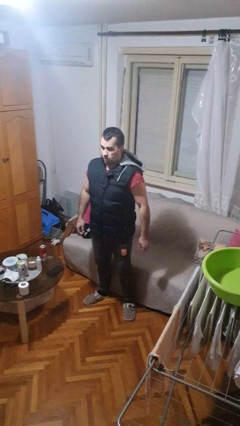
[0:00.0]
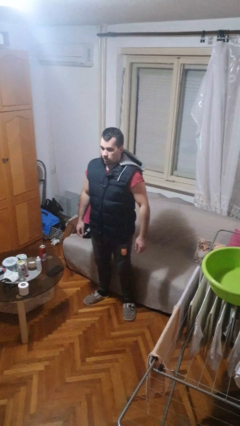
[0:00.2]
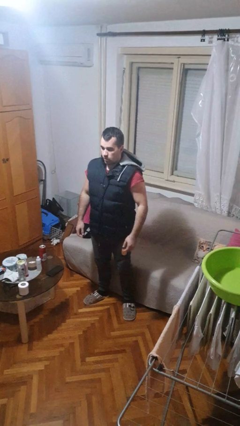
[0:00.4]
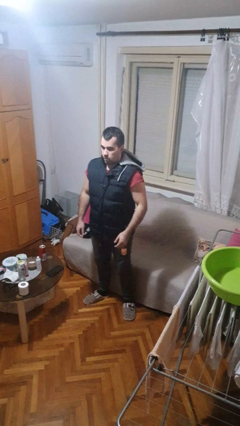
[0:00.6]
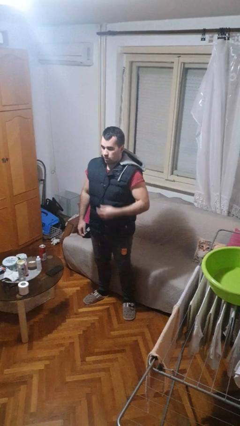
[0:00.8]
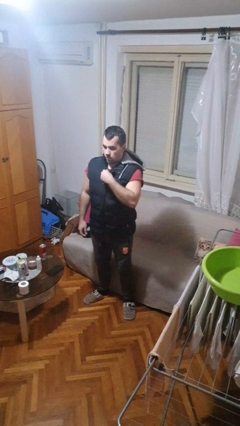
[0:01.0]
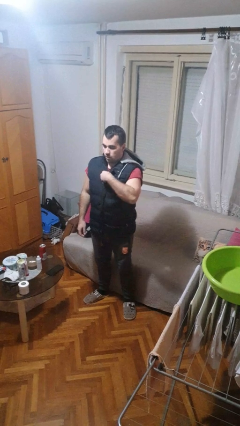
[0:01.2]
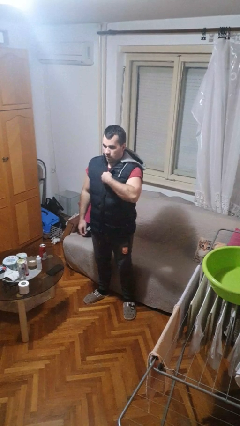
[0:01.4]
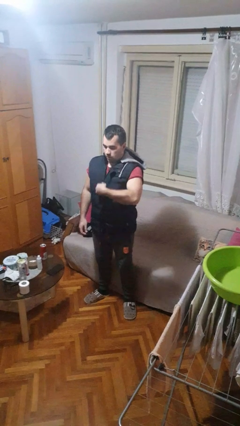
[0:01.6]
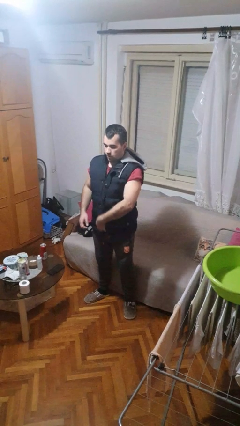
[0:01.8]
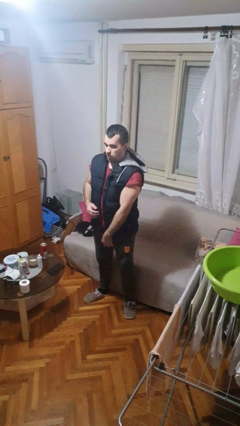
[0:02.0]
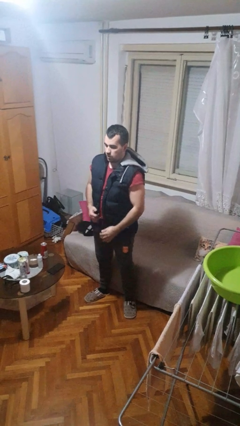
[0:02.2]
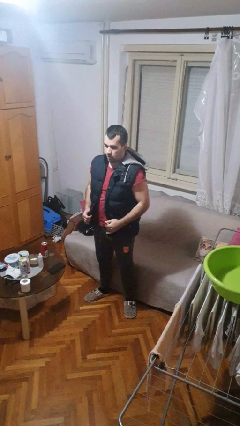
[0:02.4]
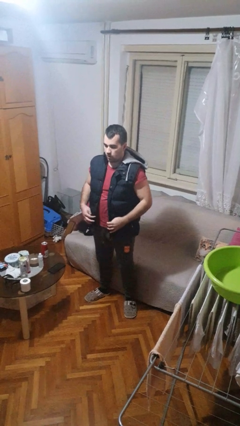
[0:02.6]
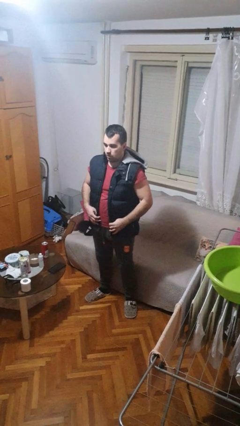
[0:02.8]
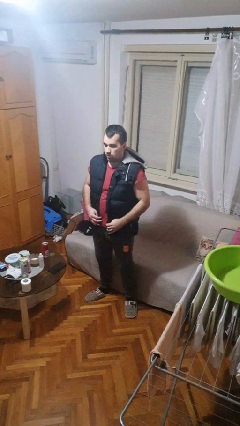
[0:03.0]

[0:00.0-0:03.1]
person unzips jacket

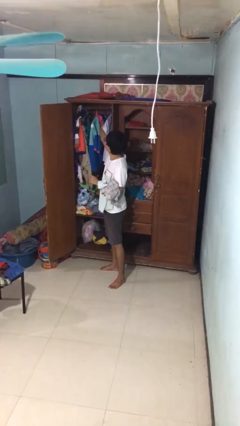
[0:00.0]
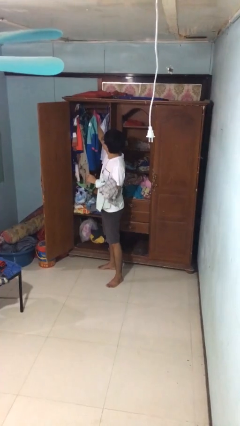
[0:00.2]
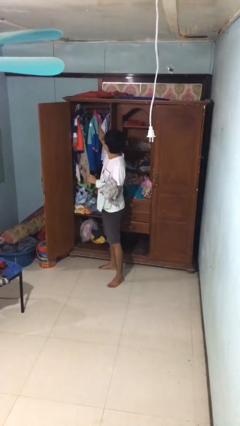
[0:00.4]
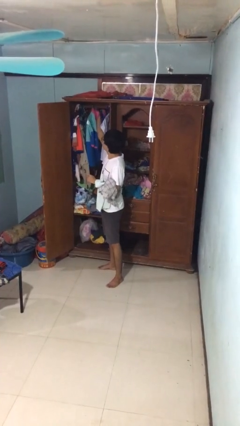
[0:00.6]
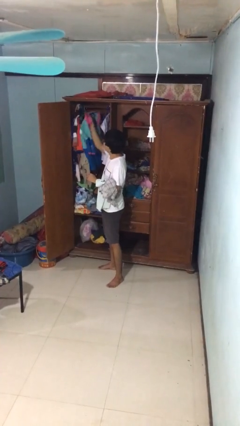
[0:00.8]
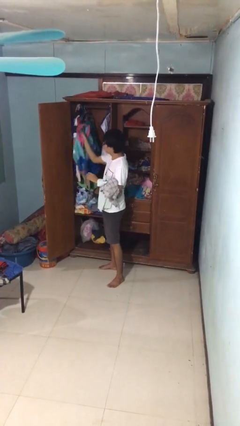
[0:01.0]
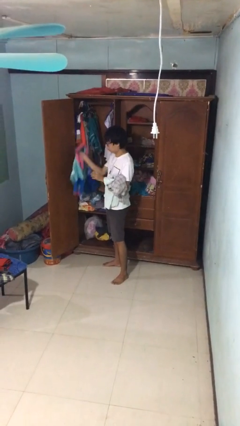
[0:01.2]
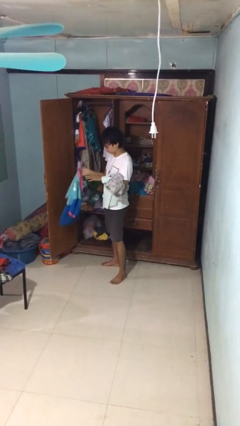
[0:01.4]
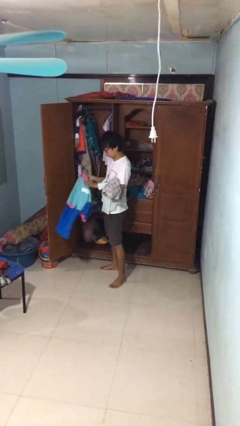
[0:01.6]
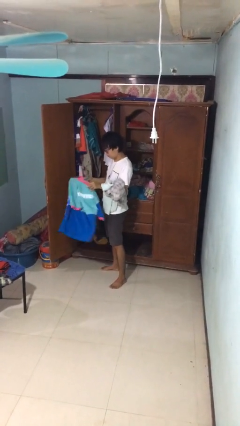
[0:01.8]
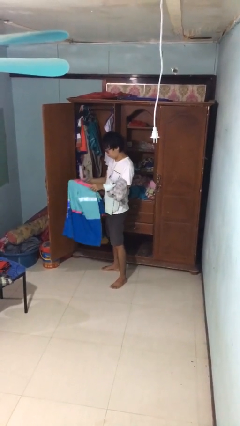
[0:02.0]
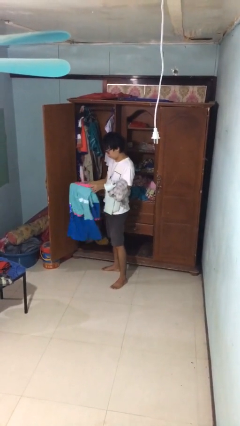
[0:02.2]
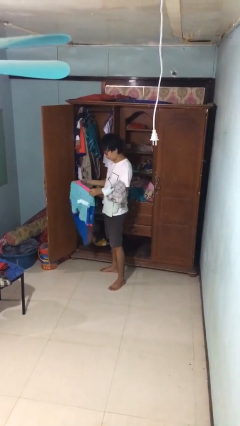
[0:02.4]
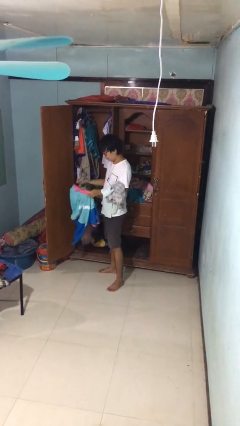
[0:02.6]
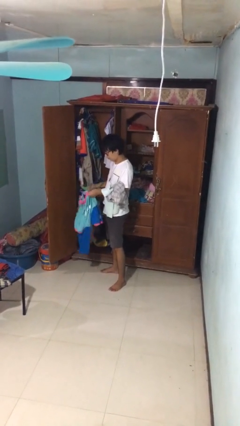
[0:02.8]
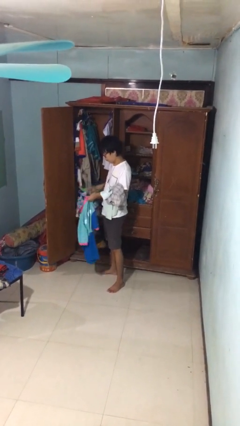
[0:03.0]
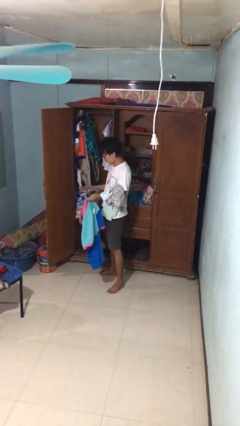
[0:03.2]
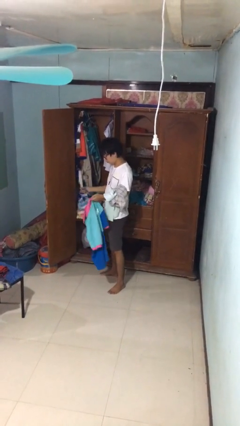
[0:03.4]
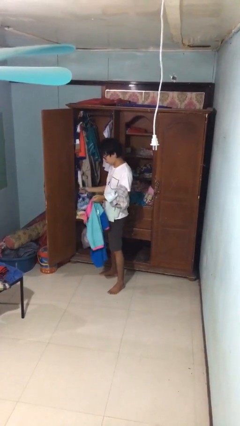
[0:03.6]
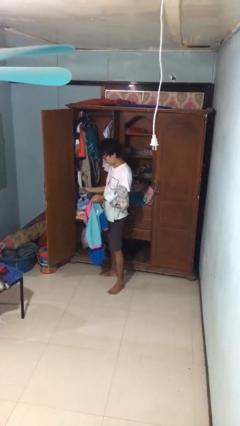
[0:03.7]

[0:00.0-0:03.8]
person takes clothes from closet

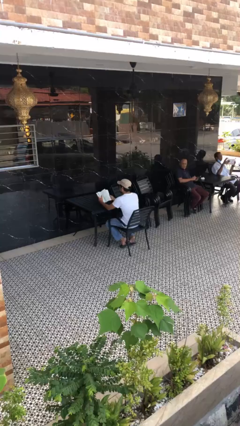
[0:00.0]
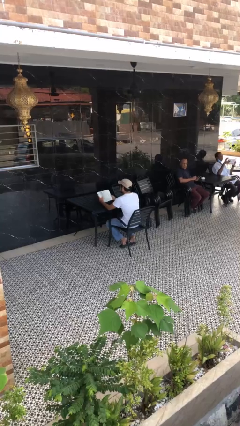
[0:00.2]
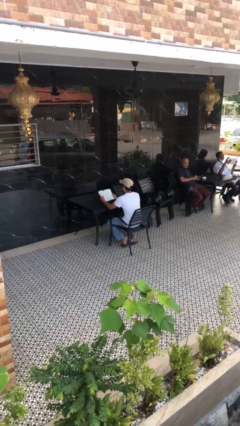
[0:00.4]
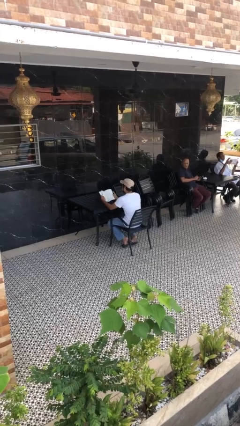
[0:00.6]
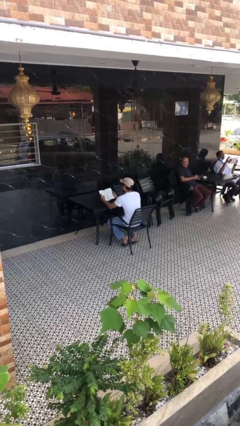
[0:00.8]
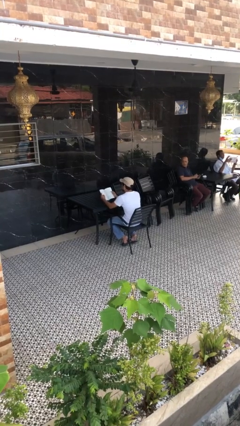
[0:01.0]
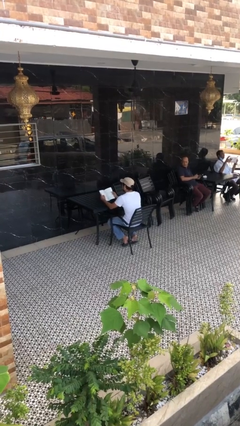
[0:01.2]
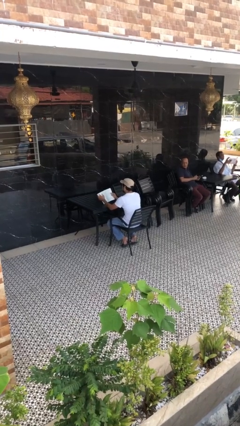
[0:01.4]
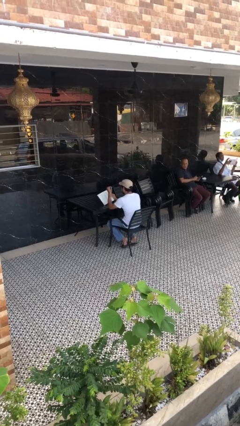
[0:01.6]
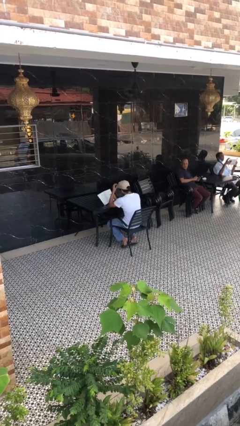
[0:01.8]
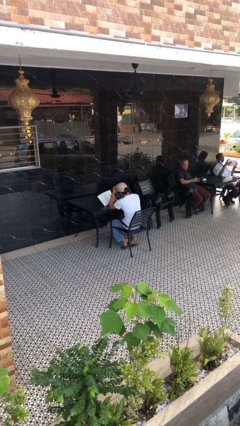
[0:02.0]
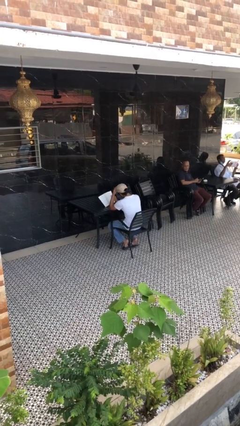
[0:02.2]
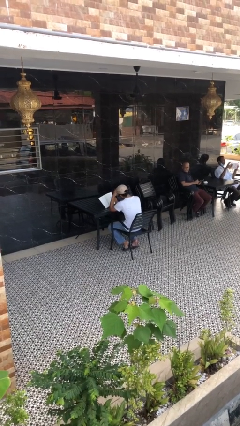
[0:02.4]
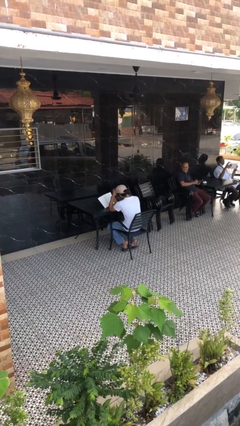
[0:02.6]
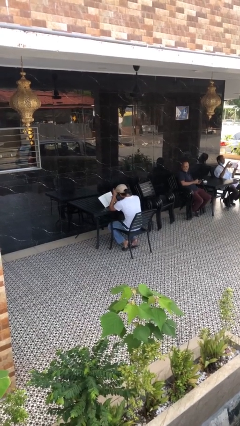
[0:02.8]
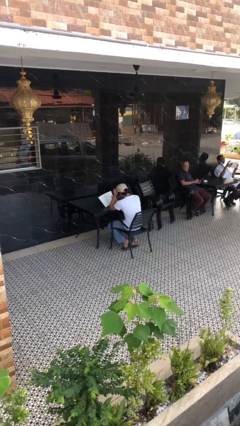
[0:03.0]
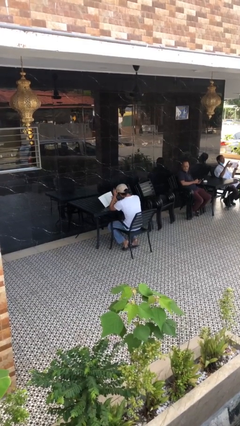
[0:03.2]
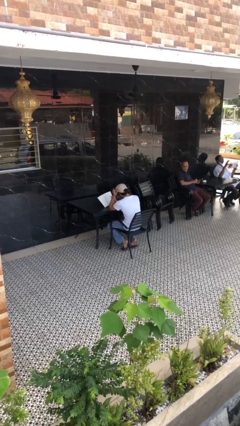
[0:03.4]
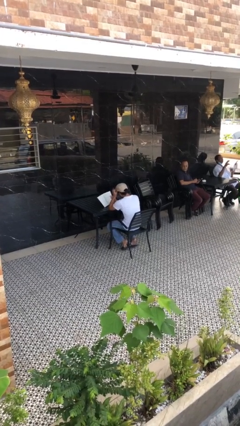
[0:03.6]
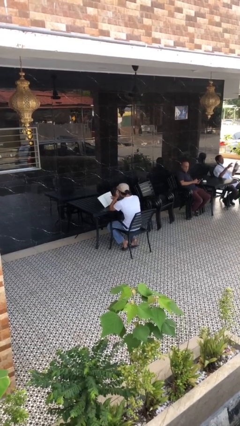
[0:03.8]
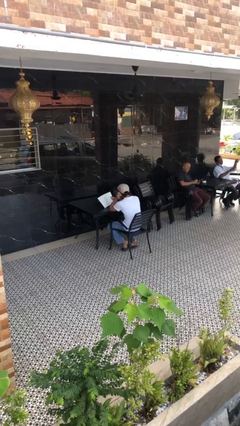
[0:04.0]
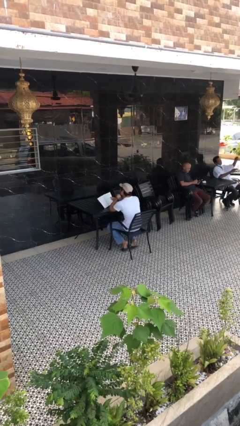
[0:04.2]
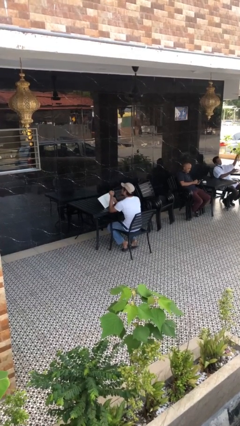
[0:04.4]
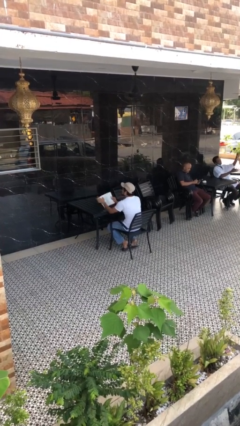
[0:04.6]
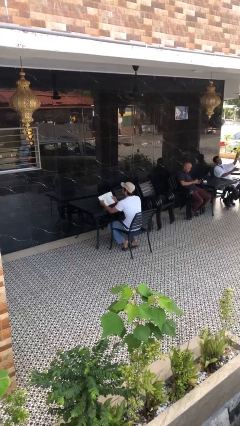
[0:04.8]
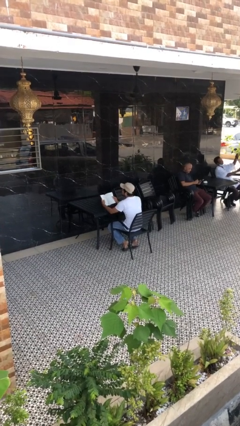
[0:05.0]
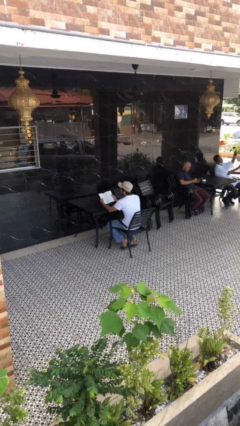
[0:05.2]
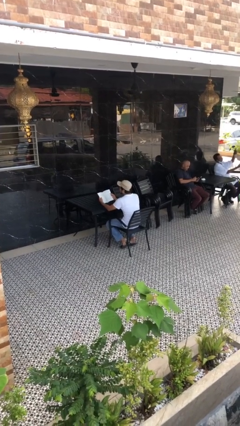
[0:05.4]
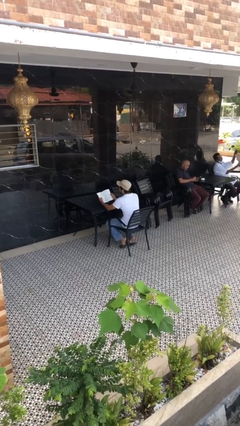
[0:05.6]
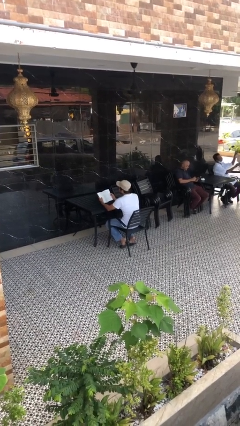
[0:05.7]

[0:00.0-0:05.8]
person reads document

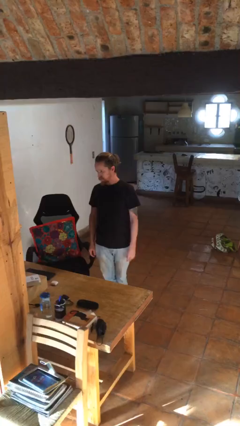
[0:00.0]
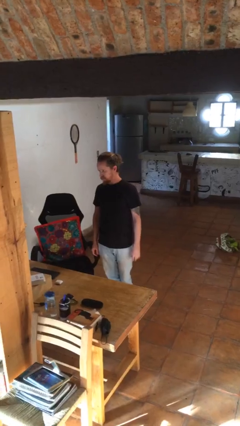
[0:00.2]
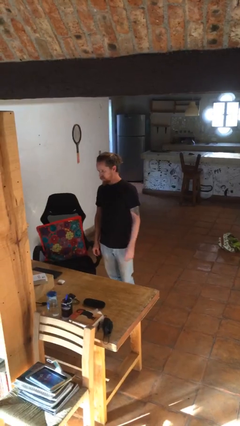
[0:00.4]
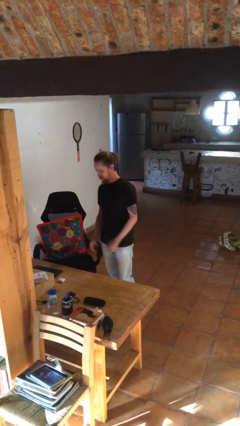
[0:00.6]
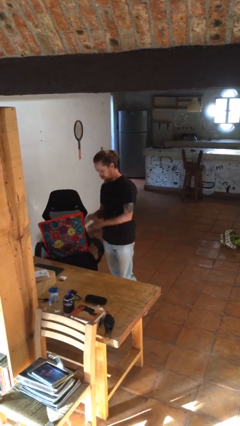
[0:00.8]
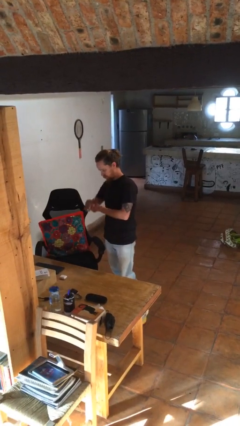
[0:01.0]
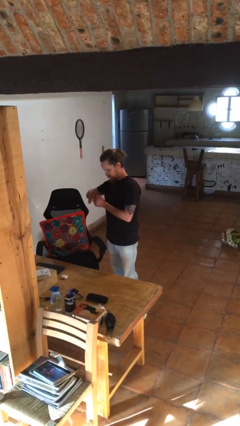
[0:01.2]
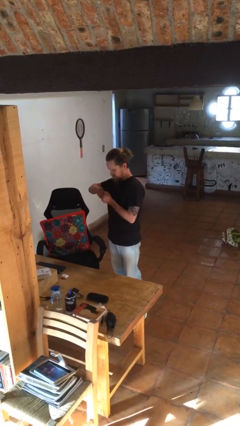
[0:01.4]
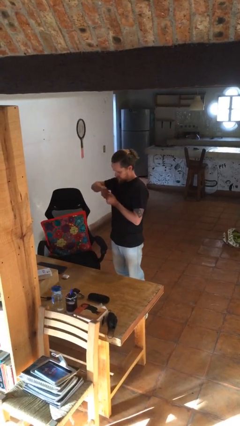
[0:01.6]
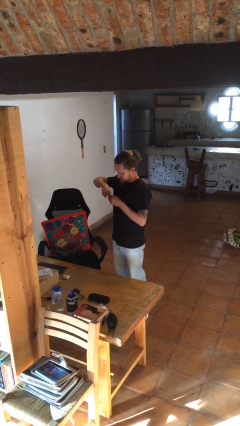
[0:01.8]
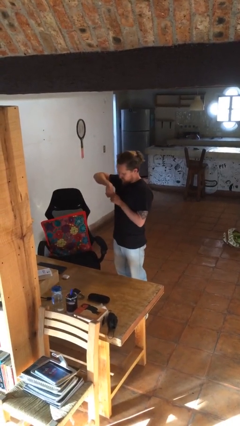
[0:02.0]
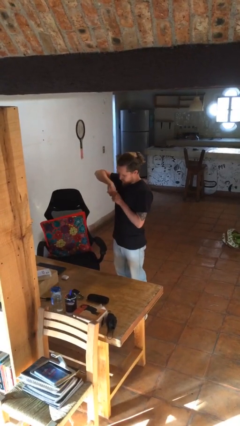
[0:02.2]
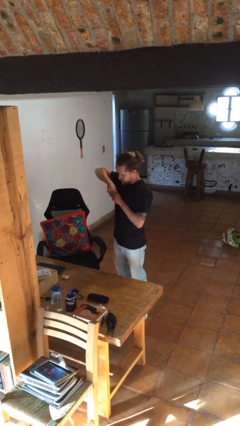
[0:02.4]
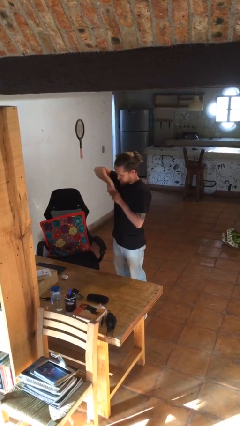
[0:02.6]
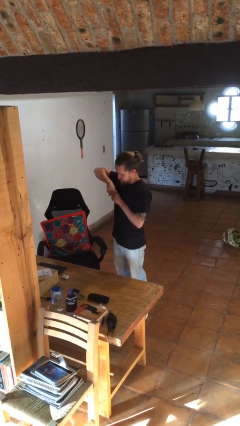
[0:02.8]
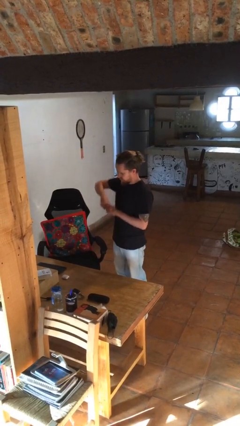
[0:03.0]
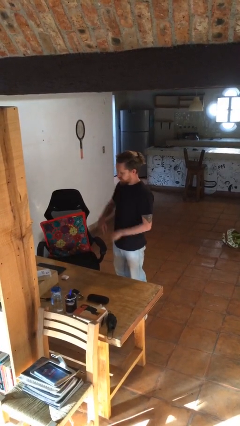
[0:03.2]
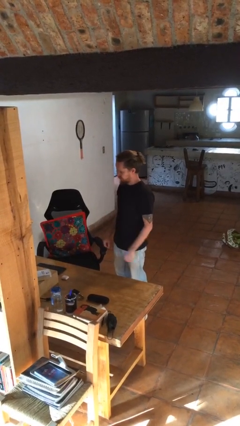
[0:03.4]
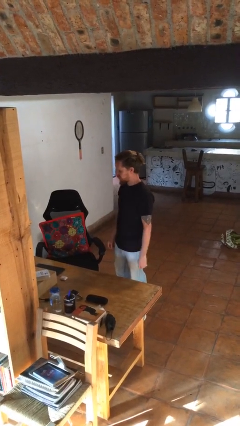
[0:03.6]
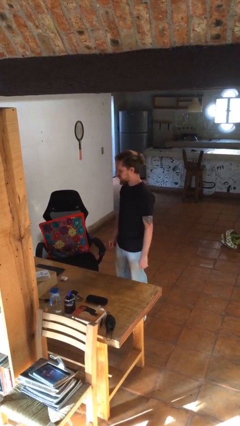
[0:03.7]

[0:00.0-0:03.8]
person cracks knuckles

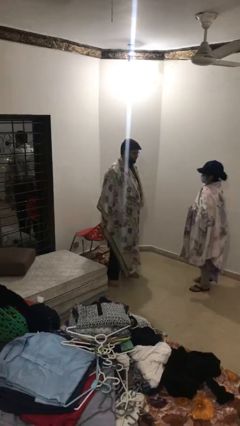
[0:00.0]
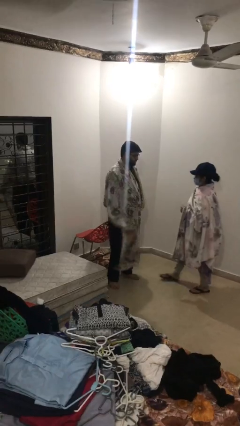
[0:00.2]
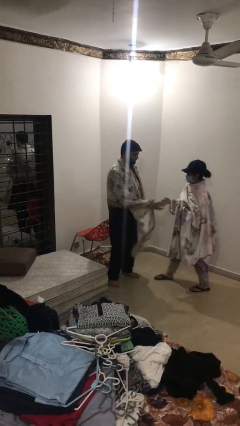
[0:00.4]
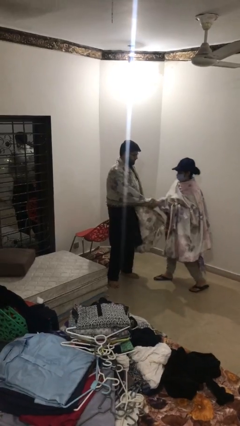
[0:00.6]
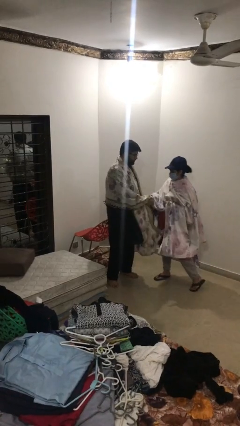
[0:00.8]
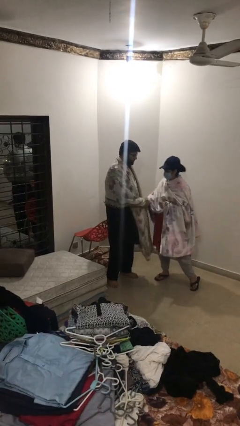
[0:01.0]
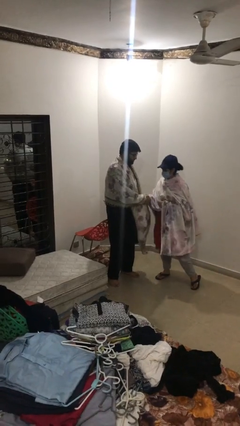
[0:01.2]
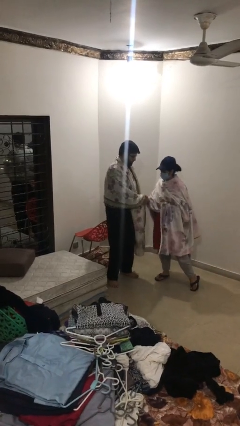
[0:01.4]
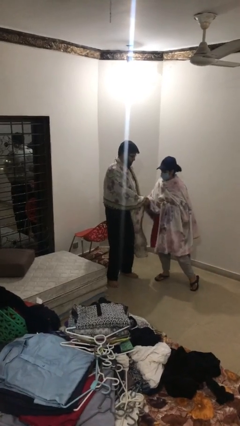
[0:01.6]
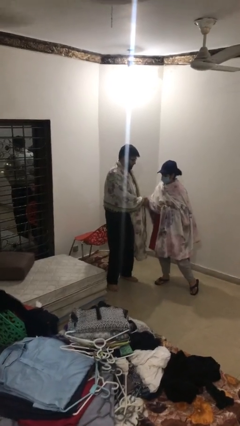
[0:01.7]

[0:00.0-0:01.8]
person shakes hand
